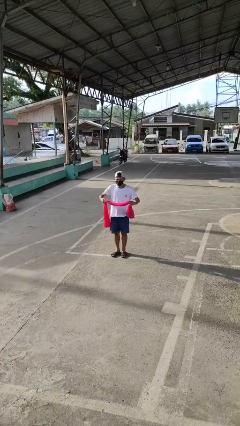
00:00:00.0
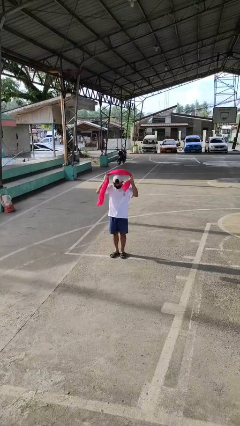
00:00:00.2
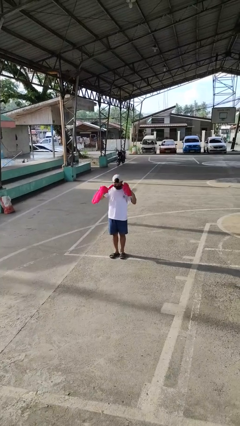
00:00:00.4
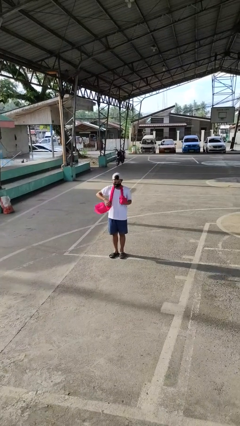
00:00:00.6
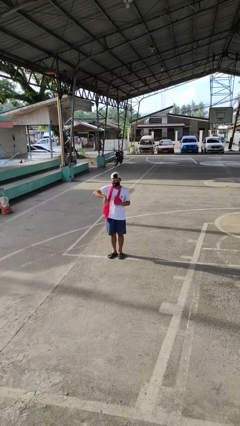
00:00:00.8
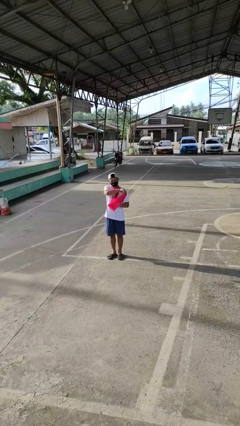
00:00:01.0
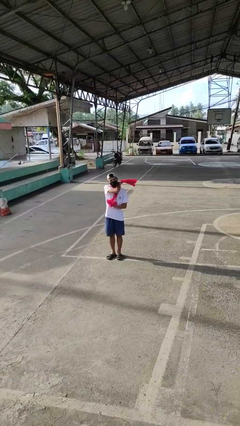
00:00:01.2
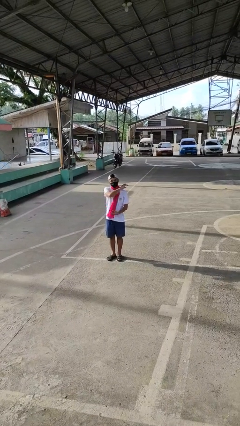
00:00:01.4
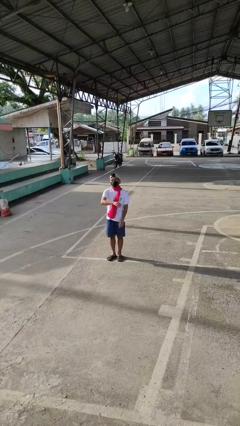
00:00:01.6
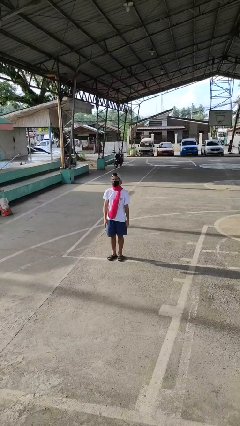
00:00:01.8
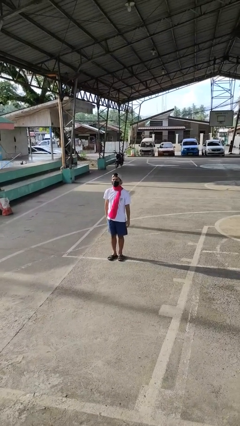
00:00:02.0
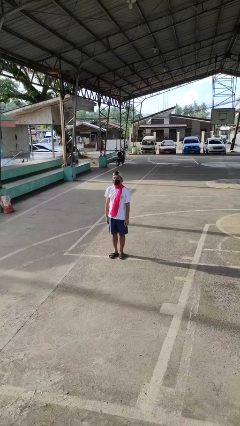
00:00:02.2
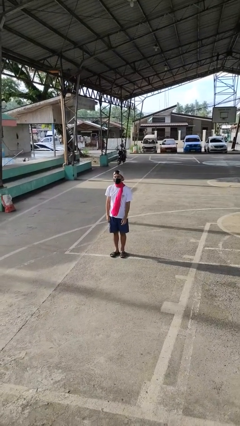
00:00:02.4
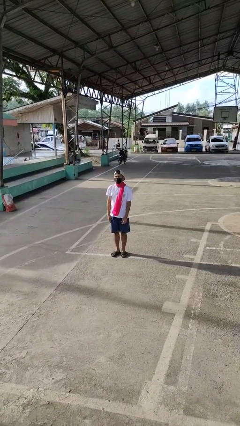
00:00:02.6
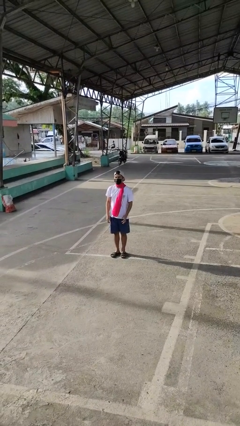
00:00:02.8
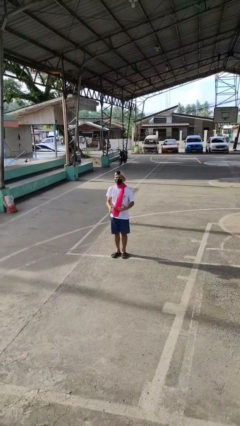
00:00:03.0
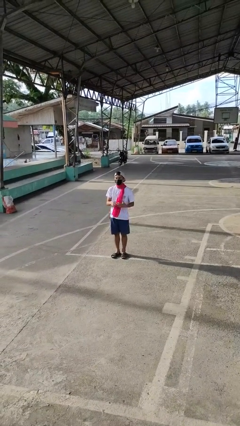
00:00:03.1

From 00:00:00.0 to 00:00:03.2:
person puts on scarf

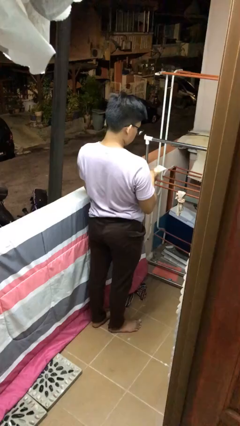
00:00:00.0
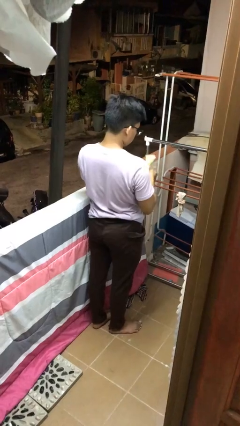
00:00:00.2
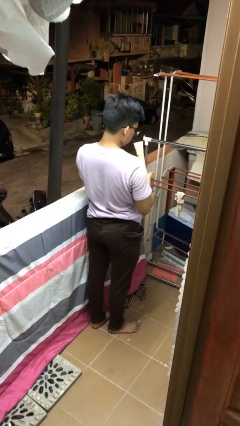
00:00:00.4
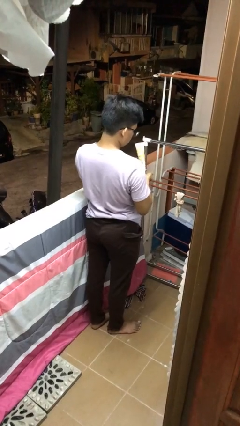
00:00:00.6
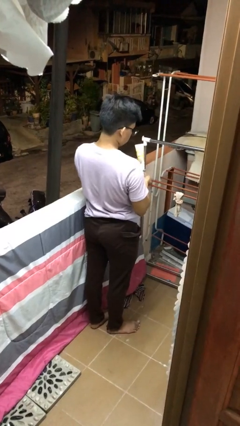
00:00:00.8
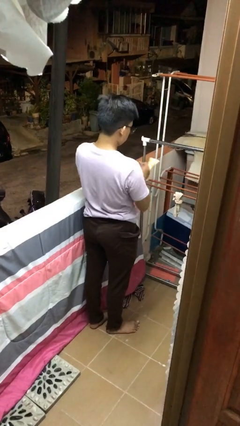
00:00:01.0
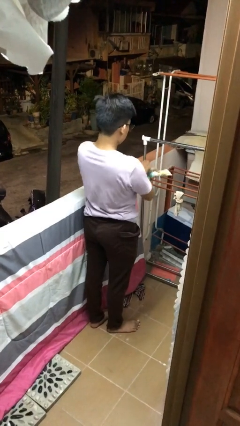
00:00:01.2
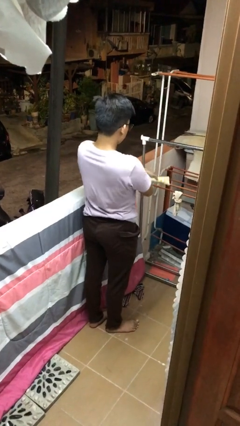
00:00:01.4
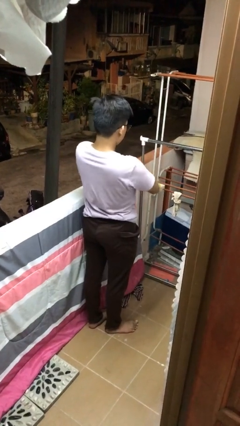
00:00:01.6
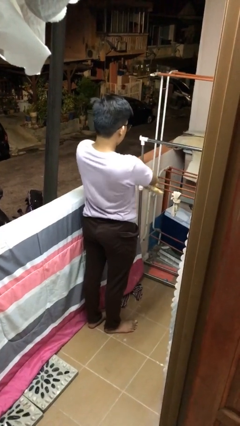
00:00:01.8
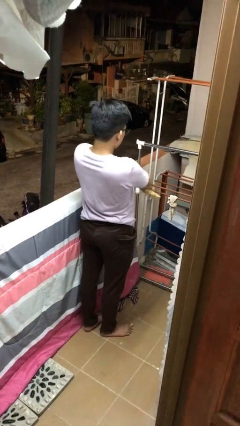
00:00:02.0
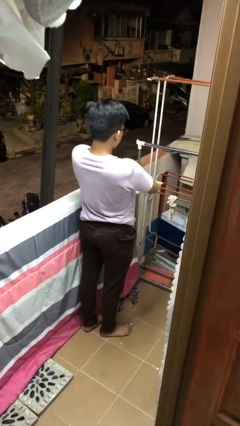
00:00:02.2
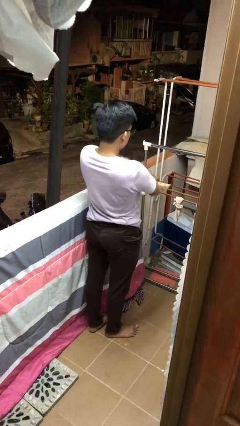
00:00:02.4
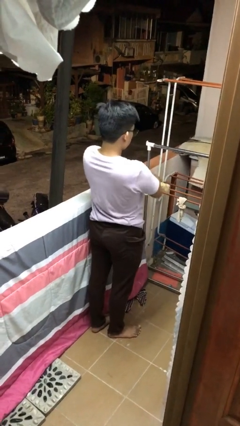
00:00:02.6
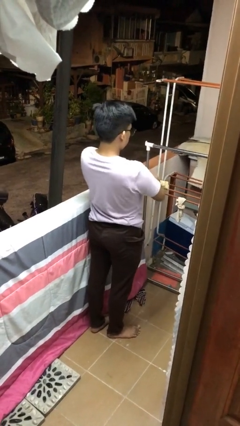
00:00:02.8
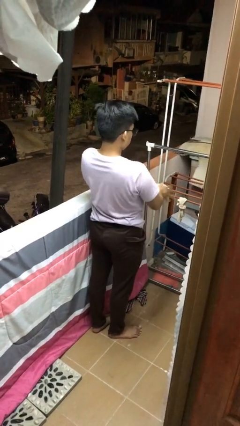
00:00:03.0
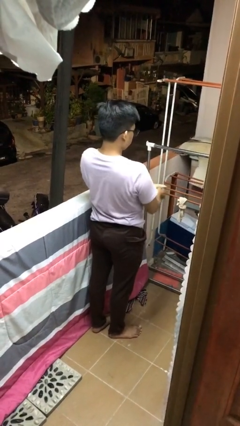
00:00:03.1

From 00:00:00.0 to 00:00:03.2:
person applies sunscreen

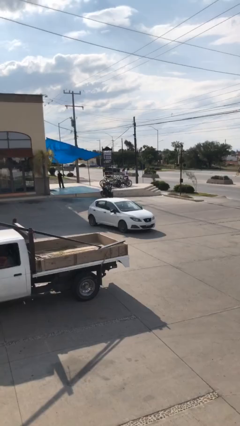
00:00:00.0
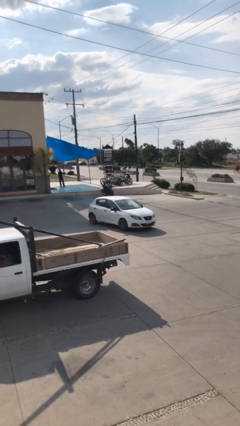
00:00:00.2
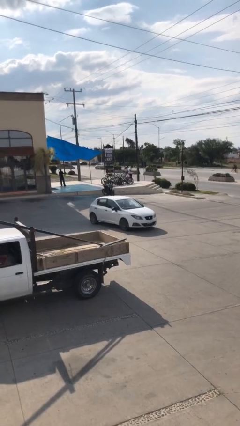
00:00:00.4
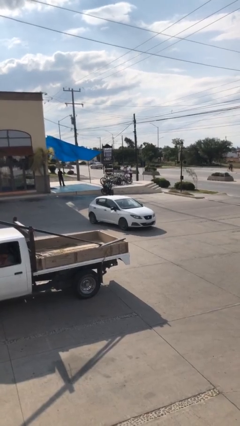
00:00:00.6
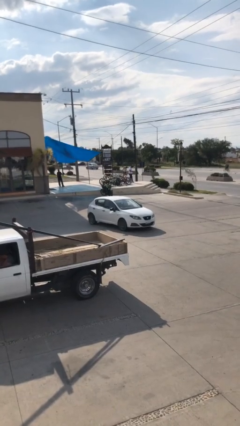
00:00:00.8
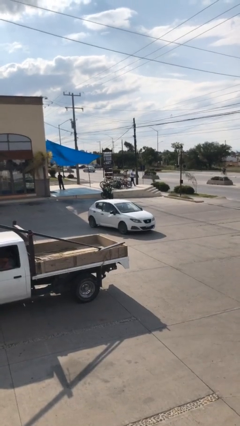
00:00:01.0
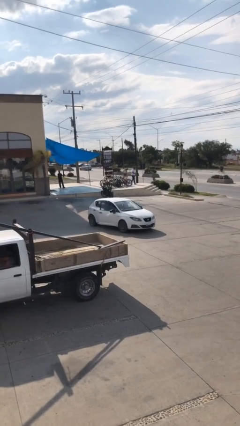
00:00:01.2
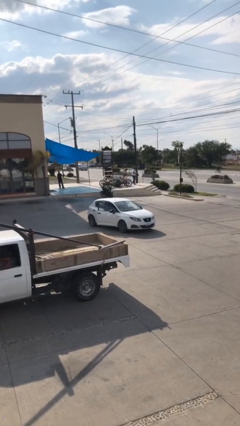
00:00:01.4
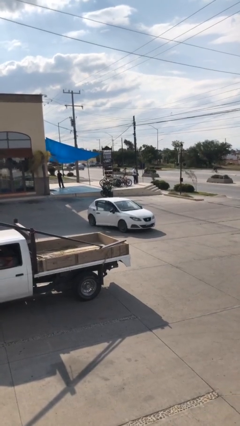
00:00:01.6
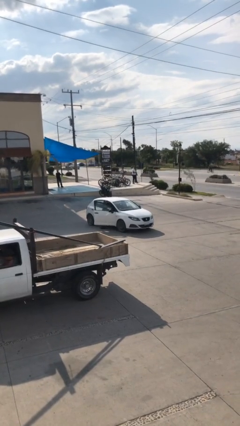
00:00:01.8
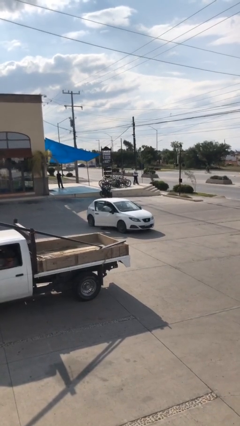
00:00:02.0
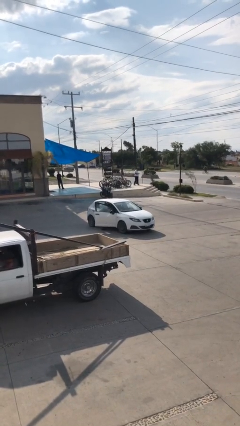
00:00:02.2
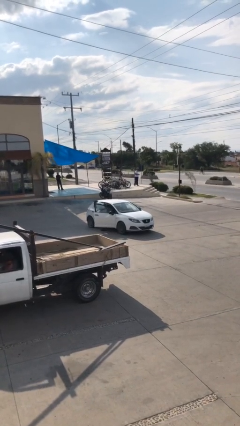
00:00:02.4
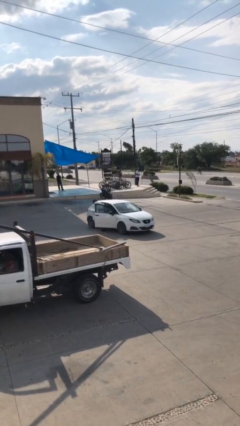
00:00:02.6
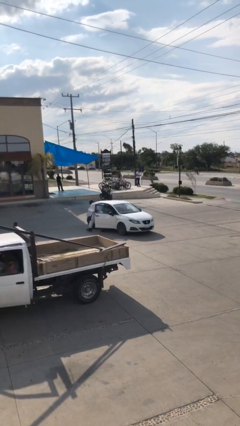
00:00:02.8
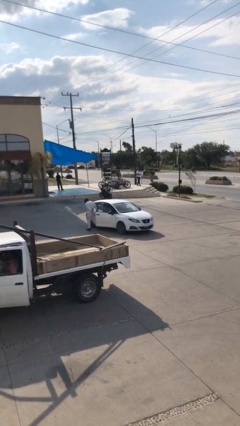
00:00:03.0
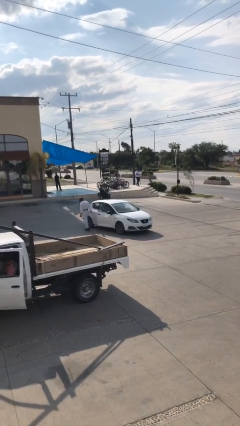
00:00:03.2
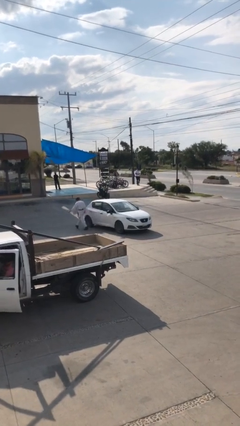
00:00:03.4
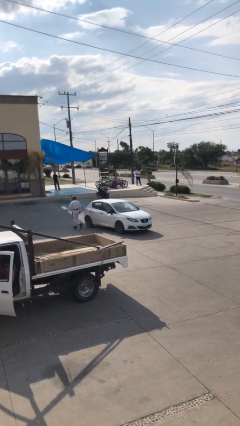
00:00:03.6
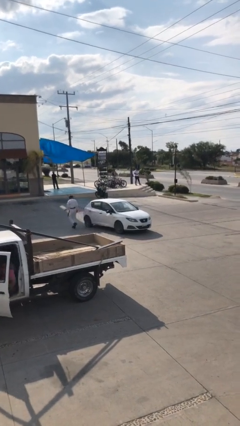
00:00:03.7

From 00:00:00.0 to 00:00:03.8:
car drops off person

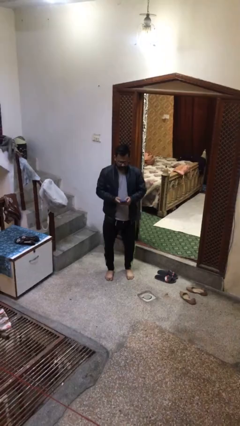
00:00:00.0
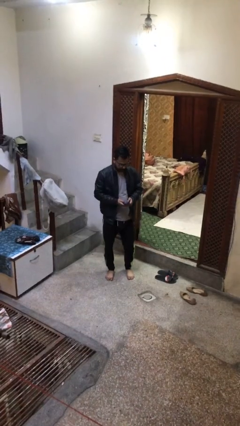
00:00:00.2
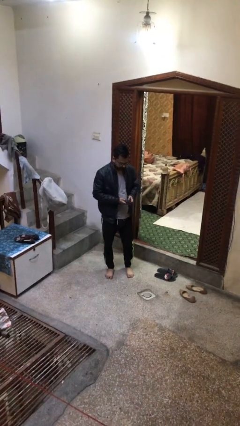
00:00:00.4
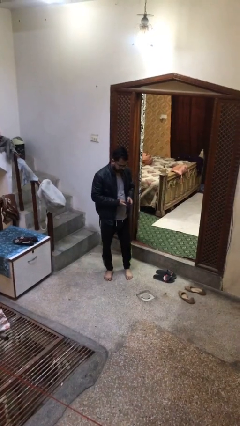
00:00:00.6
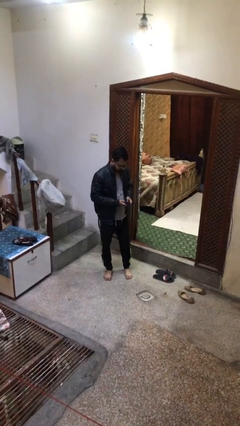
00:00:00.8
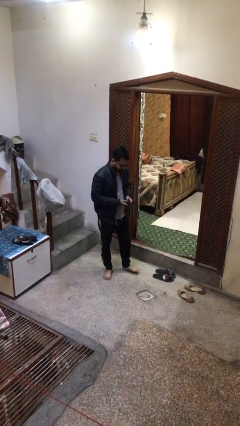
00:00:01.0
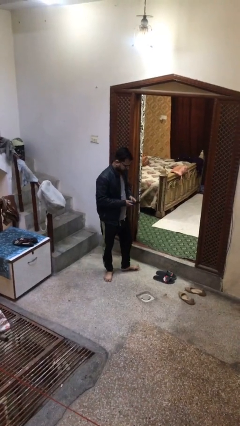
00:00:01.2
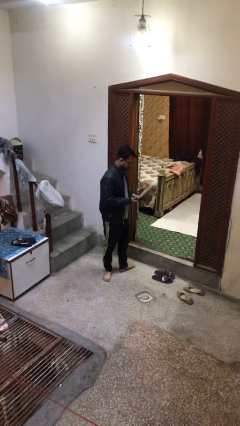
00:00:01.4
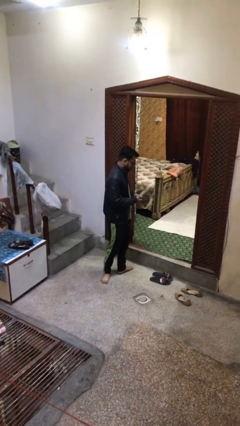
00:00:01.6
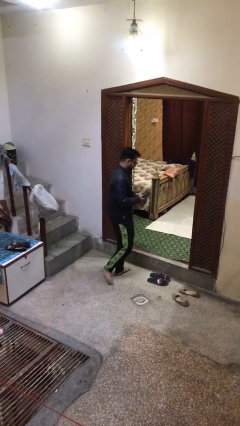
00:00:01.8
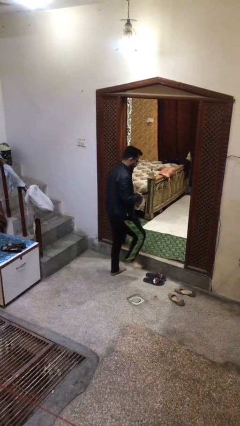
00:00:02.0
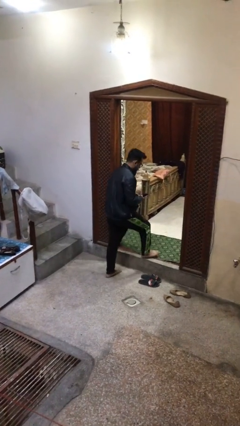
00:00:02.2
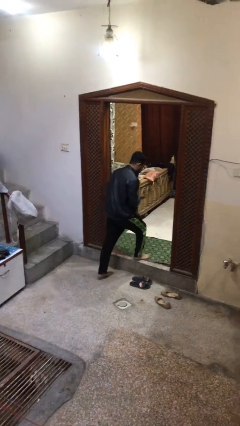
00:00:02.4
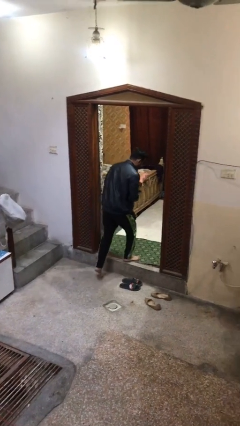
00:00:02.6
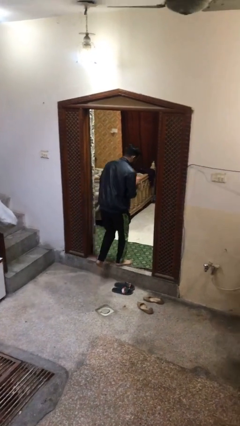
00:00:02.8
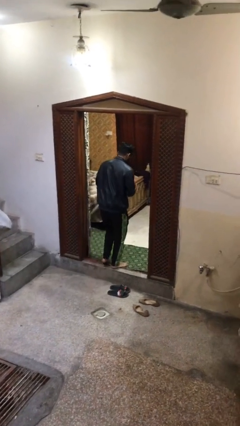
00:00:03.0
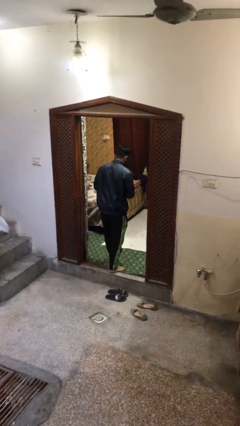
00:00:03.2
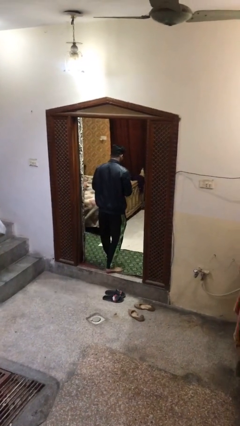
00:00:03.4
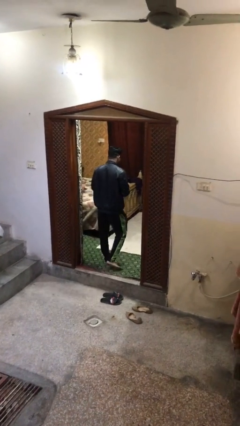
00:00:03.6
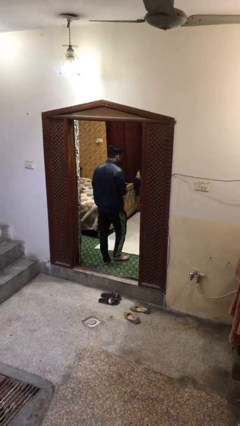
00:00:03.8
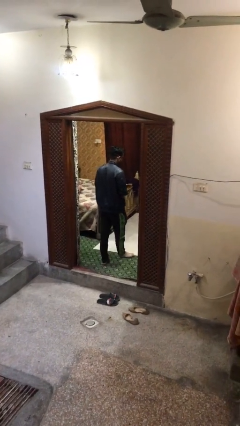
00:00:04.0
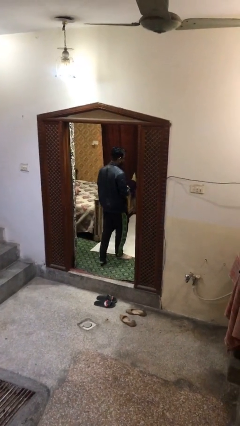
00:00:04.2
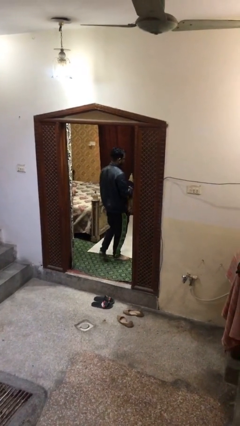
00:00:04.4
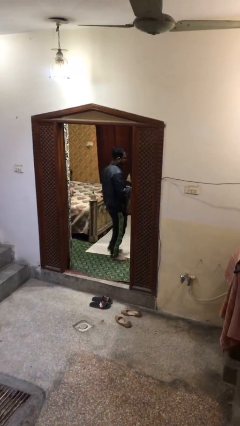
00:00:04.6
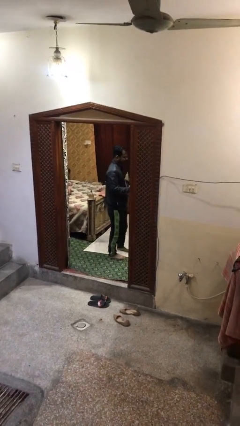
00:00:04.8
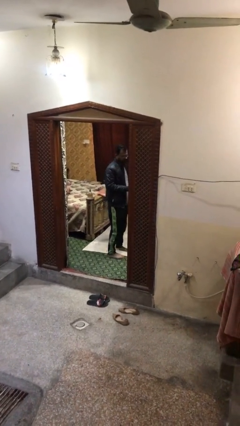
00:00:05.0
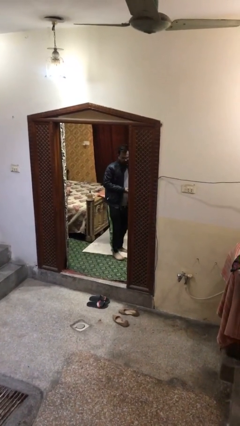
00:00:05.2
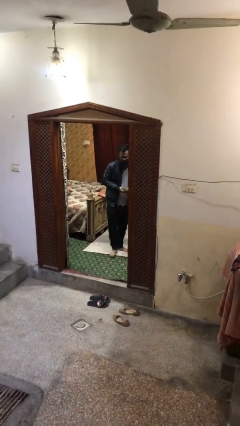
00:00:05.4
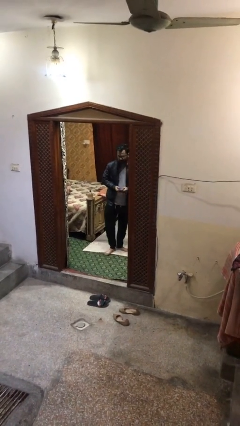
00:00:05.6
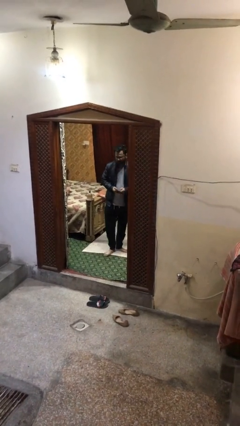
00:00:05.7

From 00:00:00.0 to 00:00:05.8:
person exits scene through structure

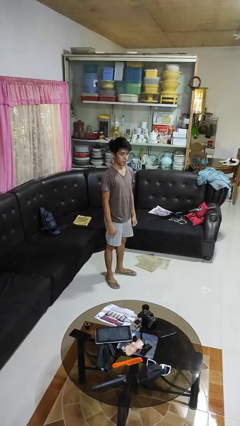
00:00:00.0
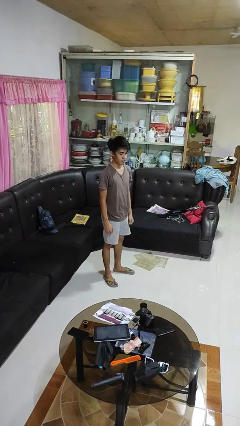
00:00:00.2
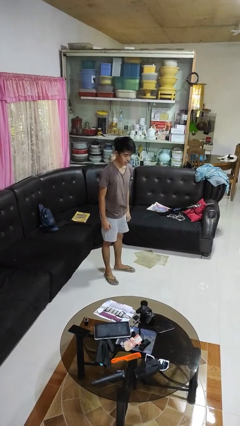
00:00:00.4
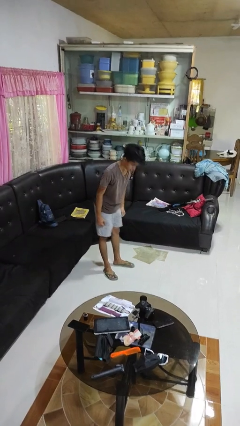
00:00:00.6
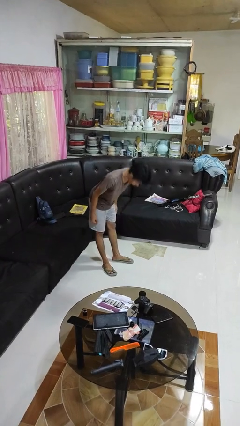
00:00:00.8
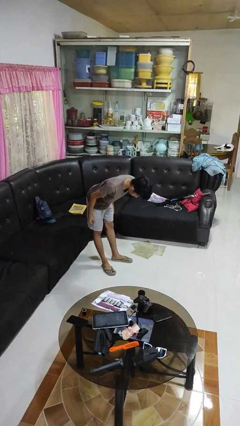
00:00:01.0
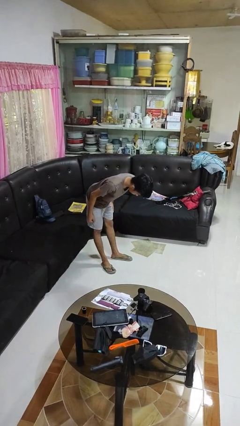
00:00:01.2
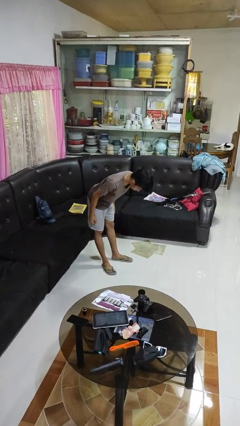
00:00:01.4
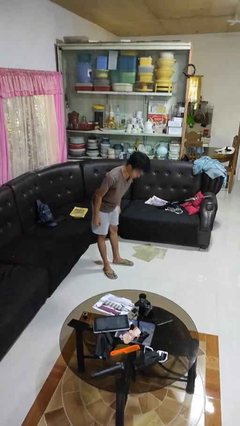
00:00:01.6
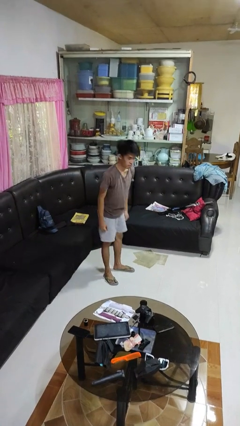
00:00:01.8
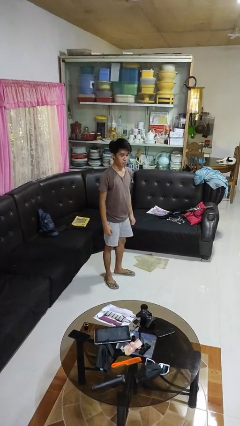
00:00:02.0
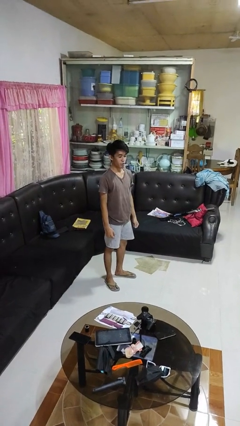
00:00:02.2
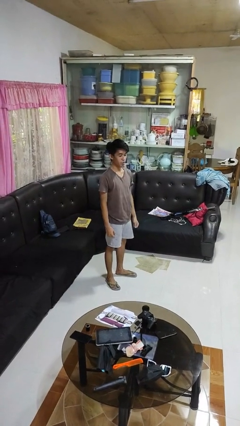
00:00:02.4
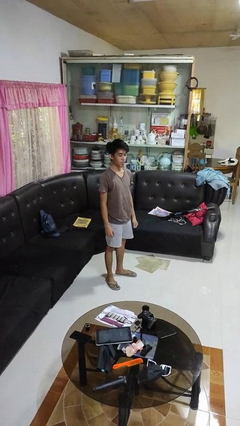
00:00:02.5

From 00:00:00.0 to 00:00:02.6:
person bows
